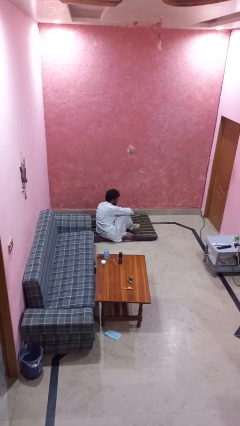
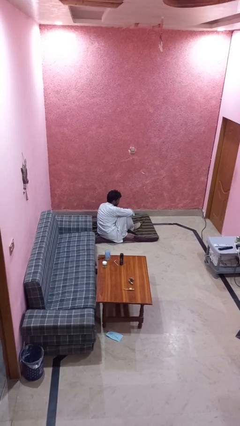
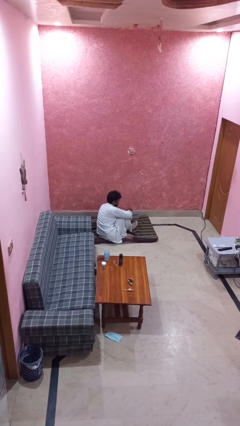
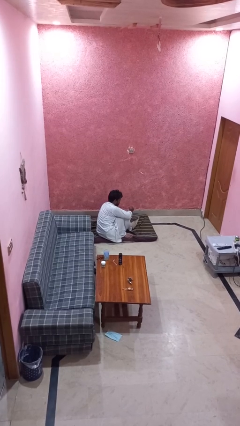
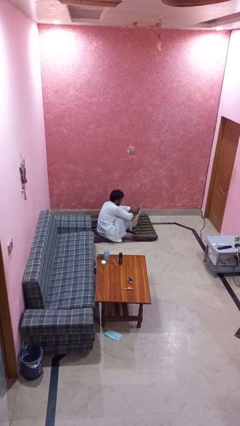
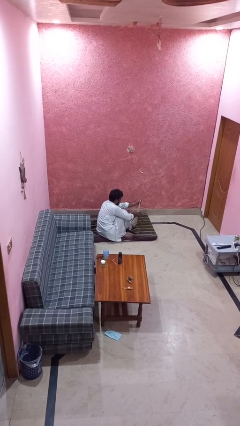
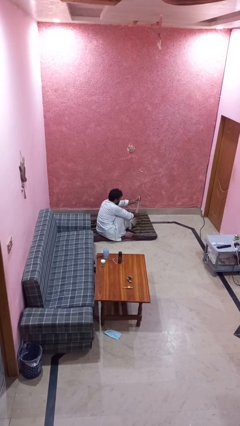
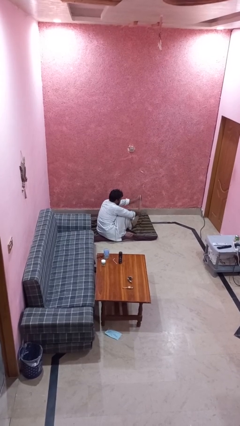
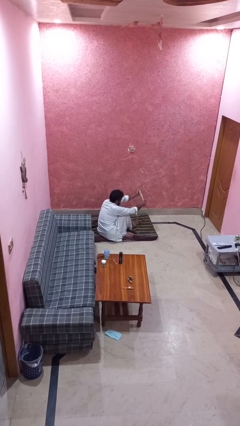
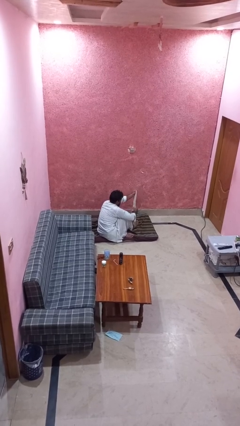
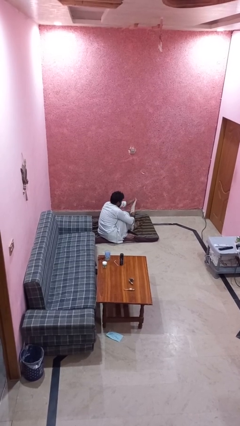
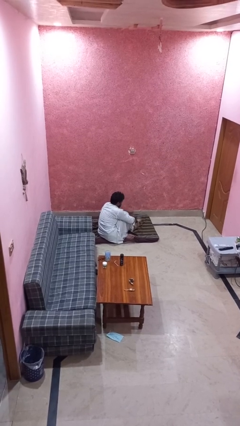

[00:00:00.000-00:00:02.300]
person takes off socks

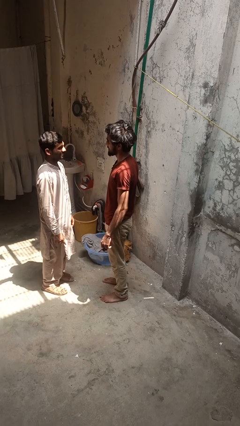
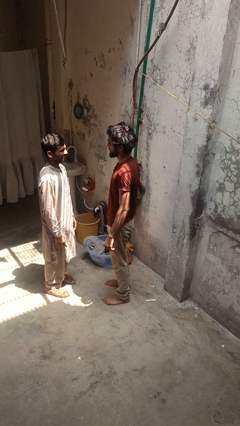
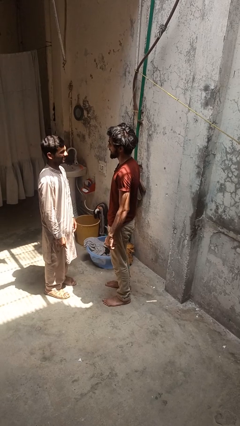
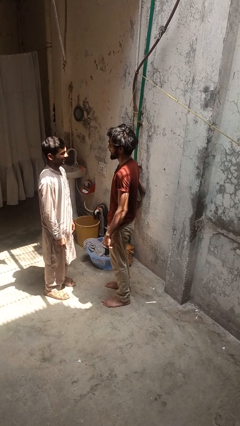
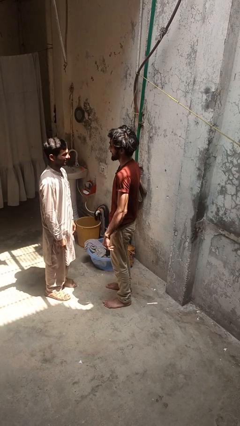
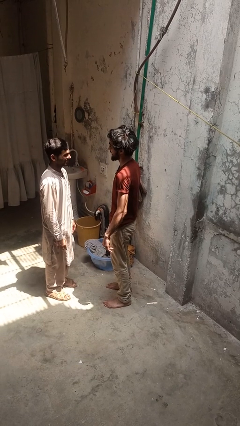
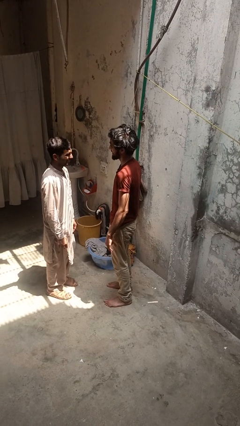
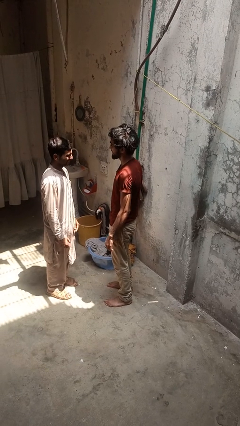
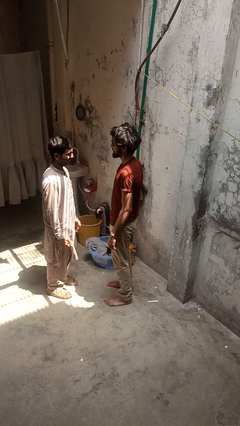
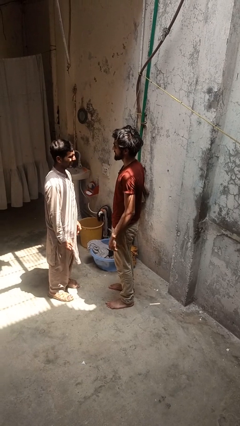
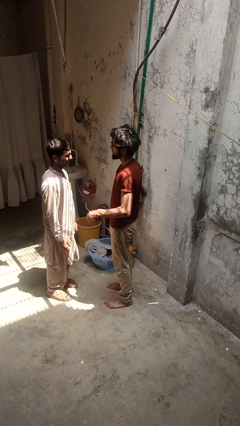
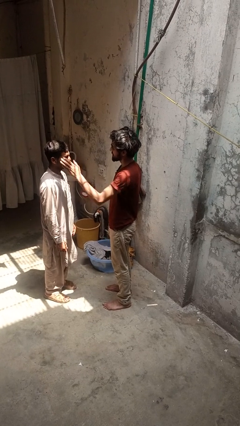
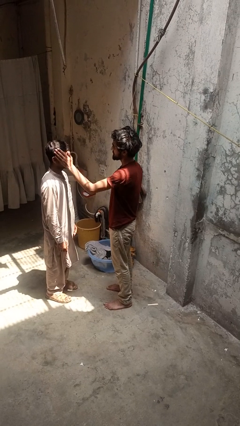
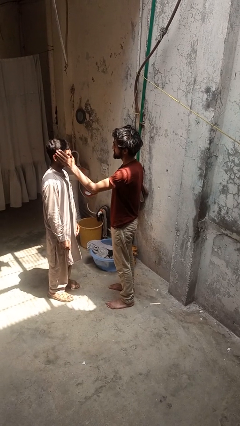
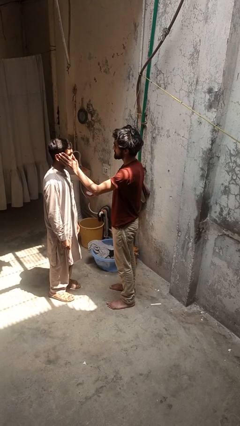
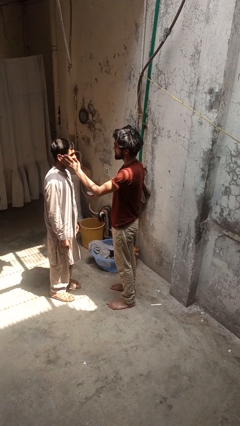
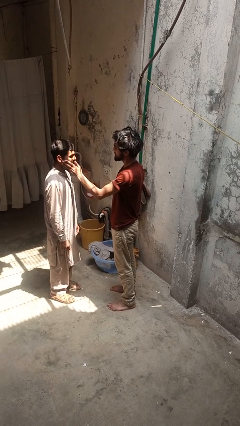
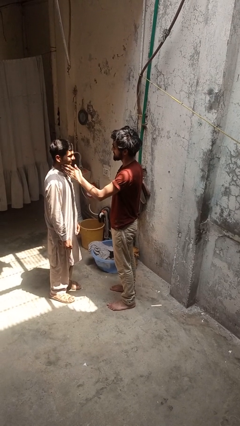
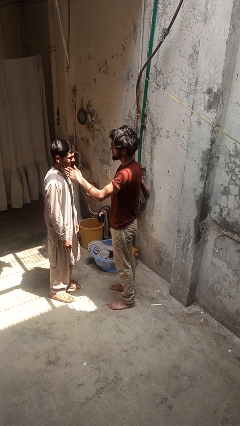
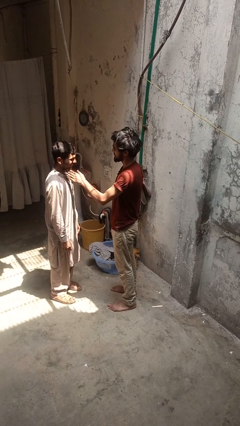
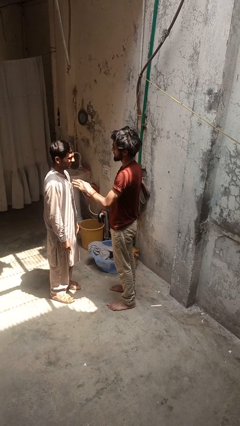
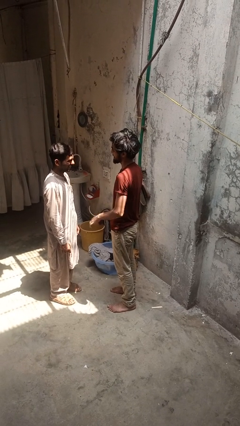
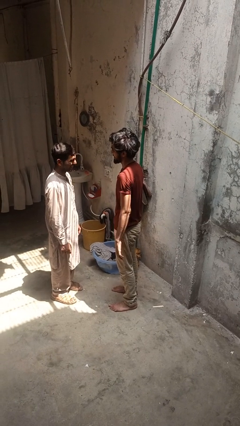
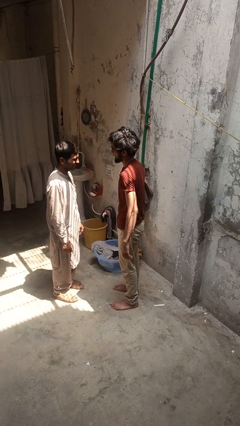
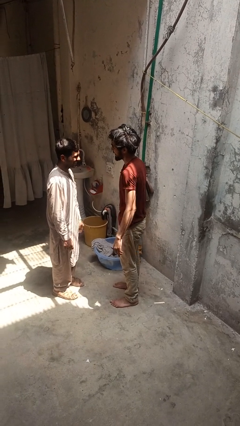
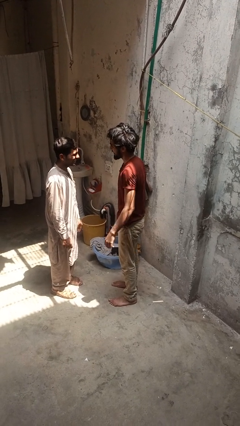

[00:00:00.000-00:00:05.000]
person touches face of person

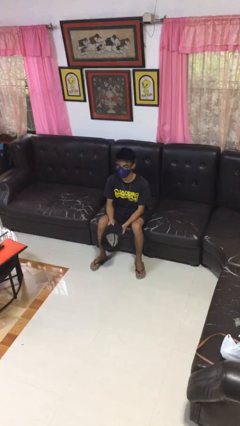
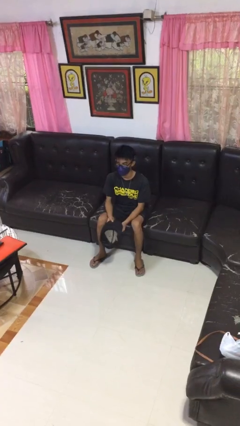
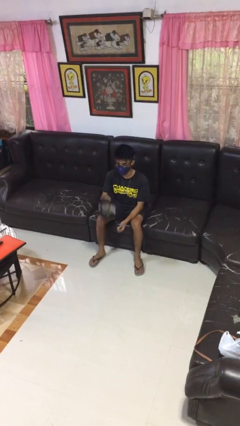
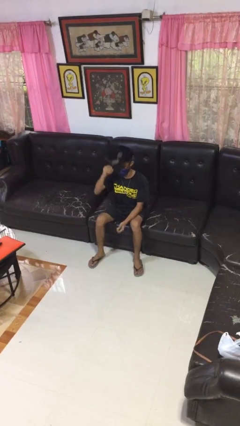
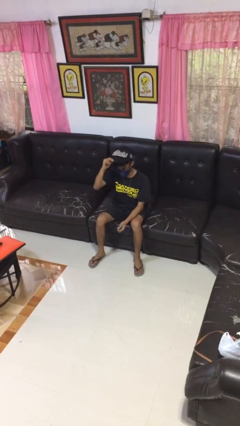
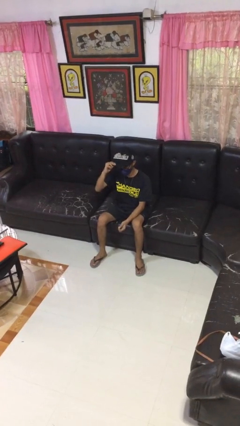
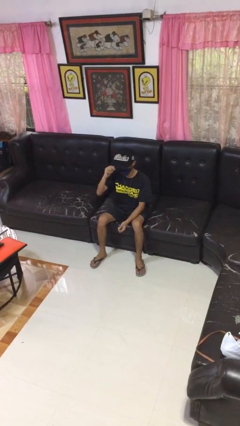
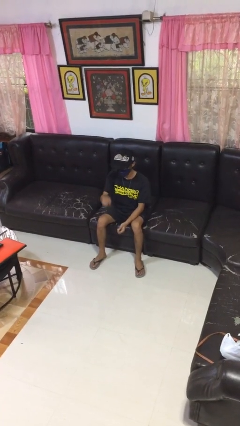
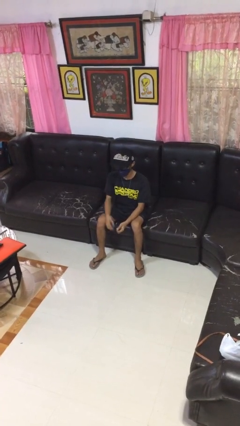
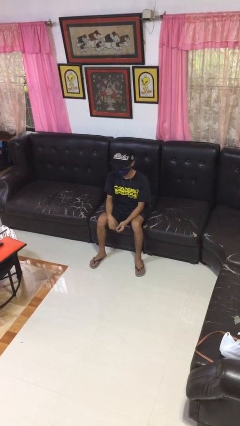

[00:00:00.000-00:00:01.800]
person puts on hat

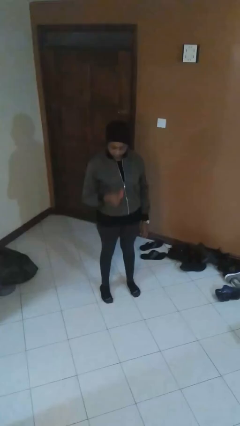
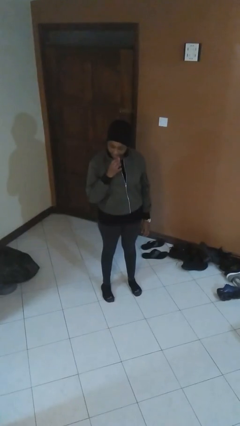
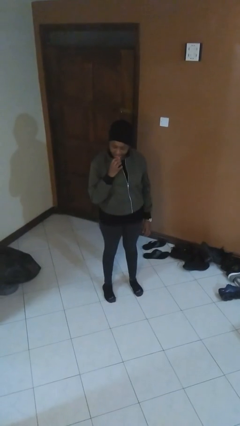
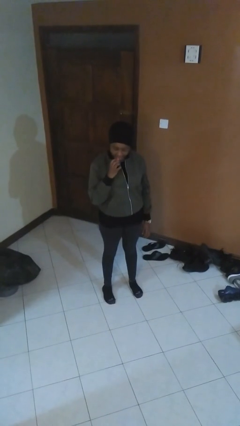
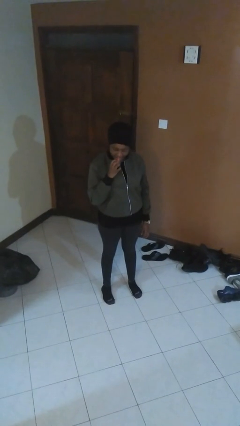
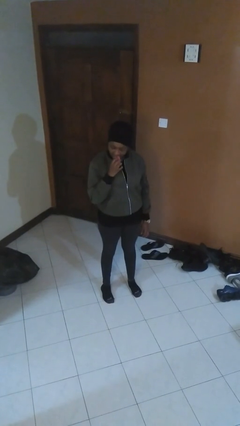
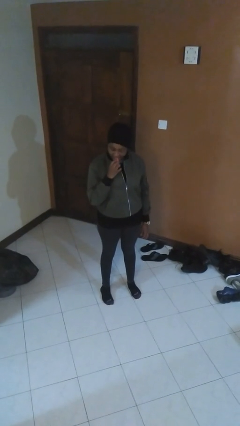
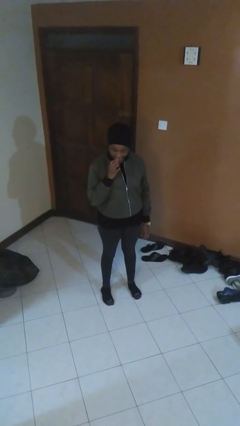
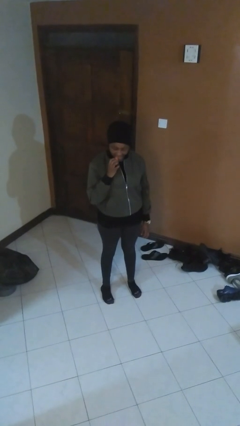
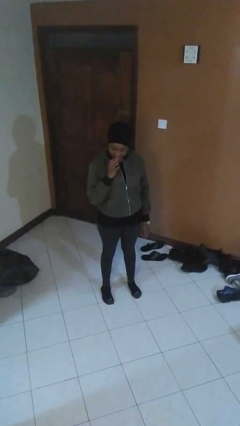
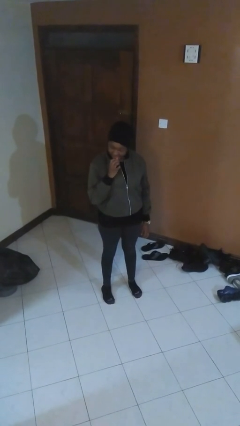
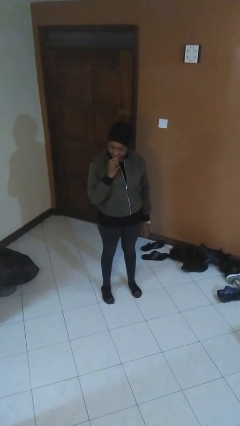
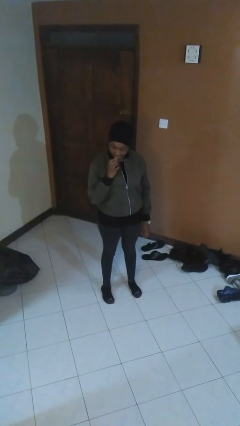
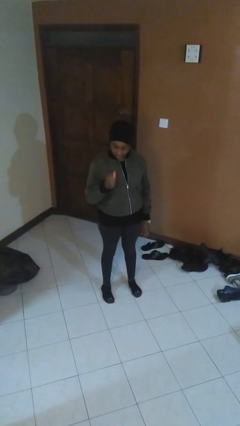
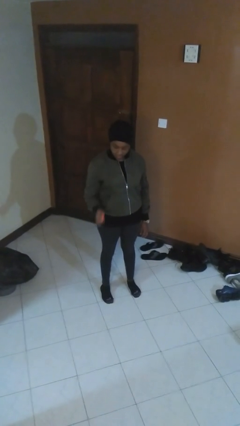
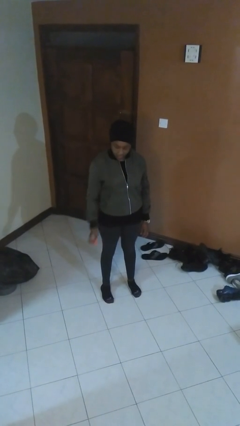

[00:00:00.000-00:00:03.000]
person applies lip makeup

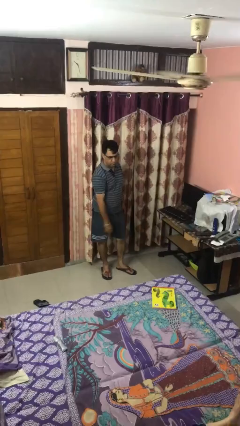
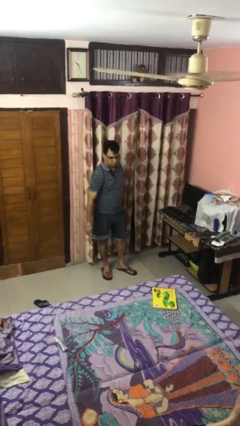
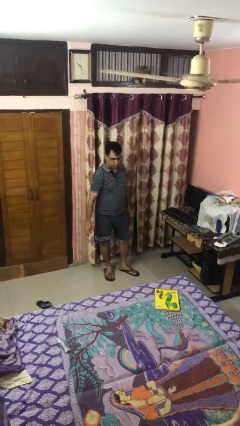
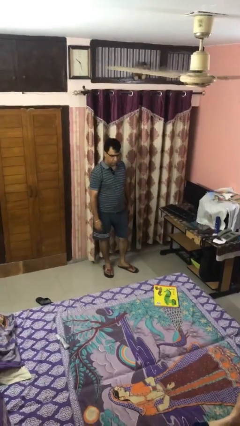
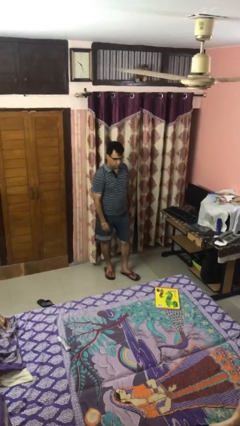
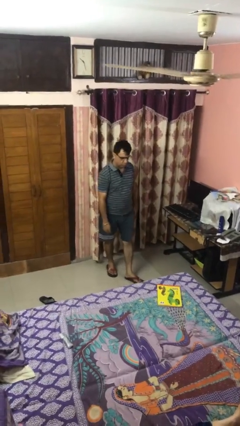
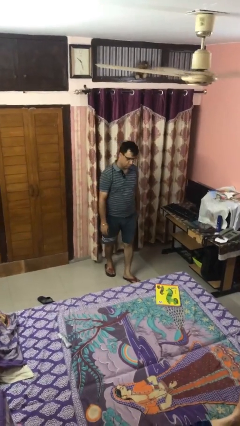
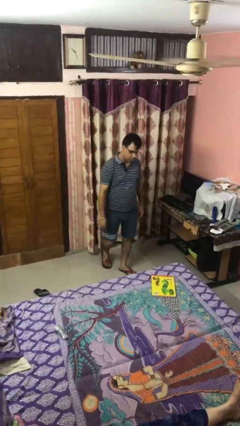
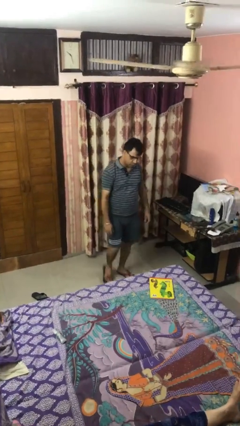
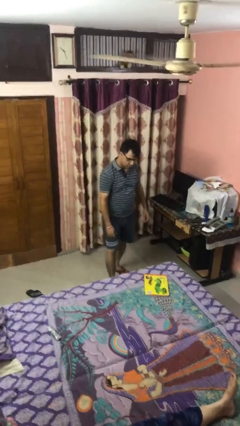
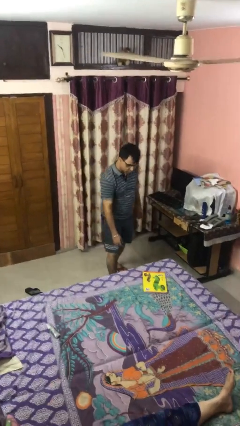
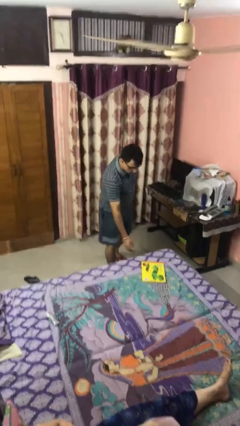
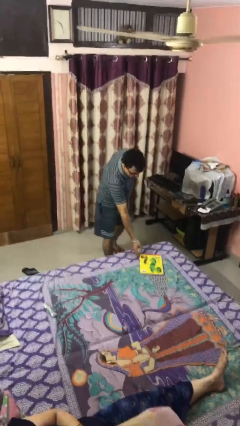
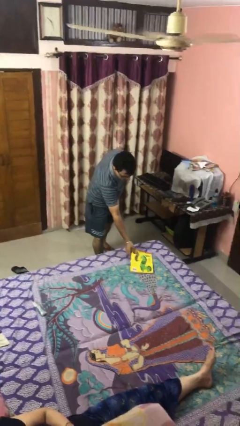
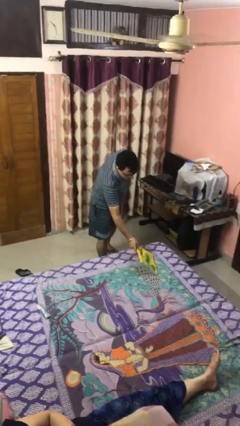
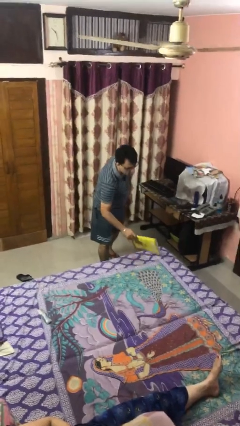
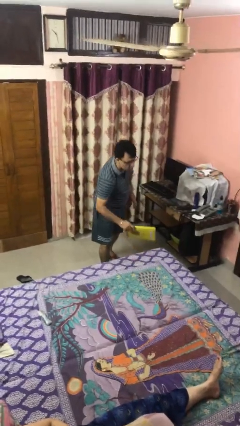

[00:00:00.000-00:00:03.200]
person picks up object from bed

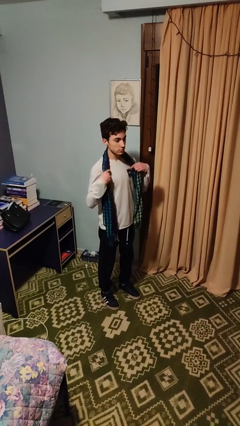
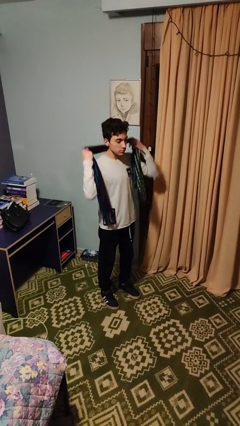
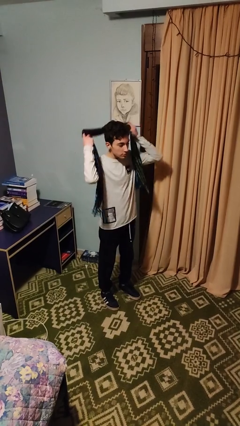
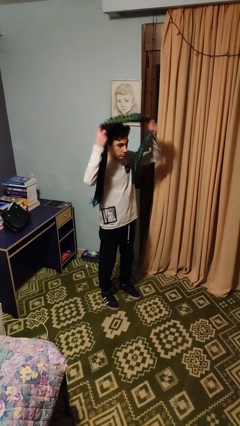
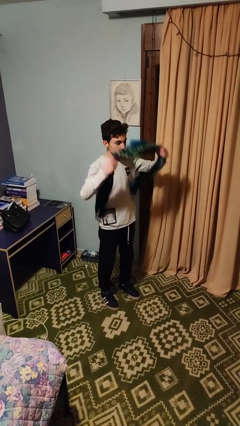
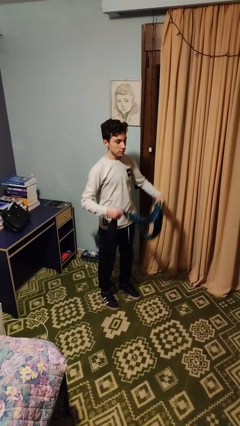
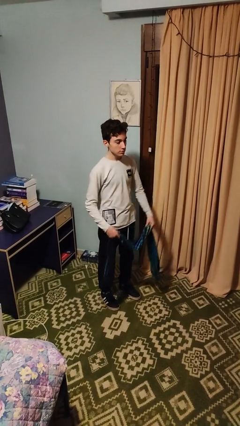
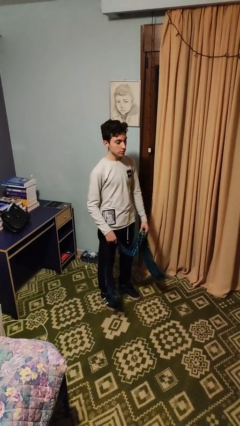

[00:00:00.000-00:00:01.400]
person takes off scarf

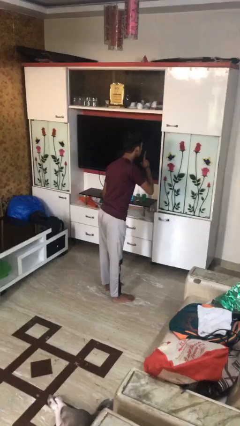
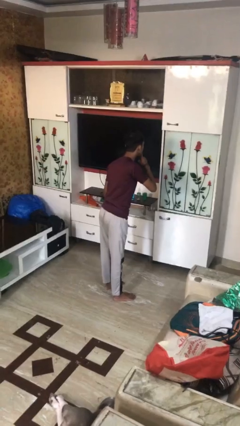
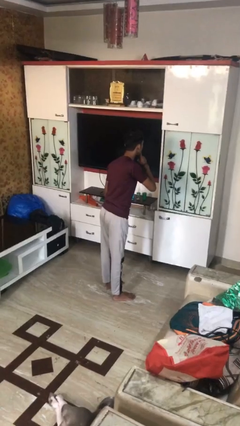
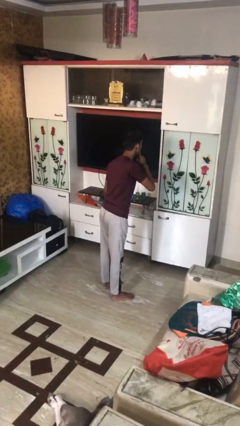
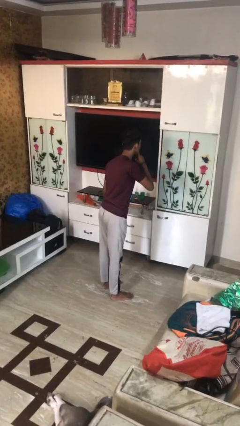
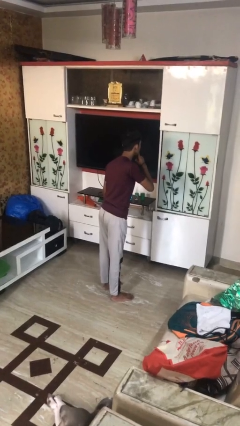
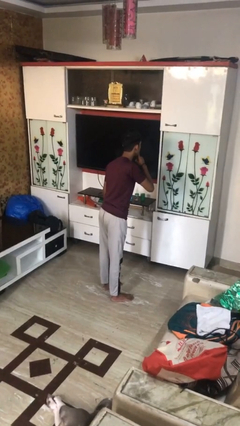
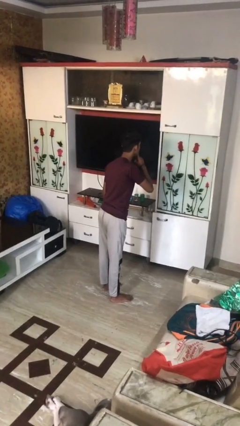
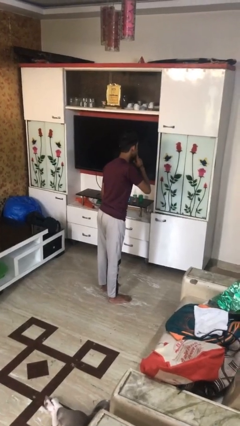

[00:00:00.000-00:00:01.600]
person gestures be quiet
